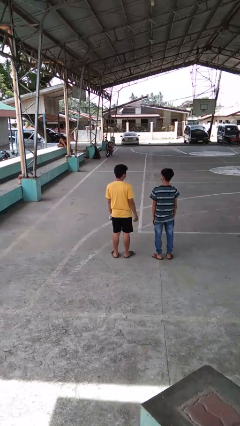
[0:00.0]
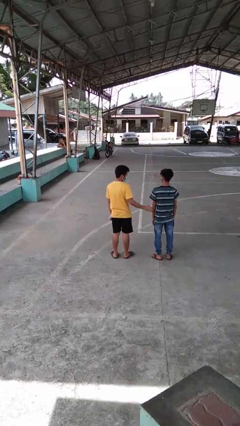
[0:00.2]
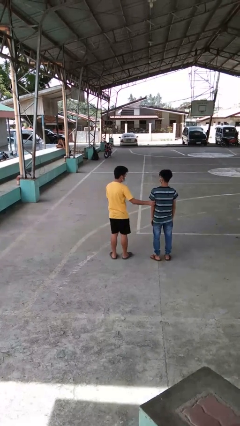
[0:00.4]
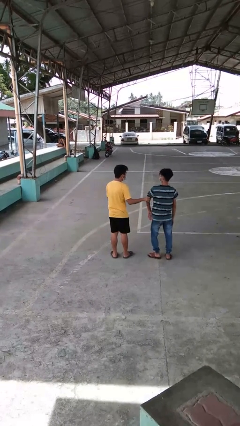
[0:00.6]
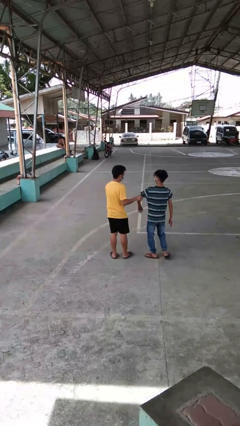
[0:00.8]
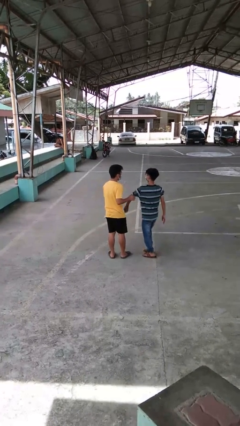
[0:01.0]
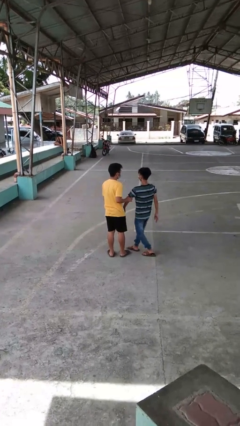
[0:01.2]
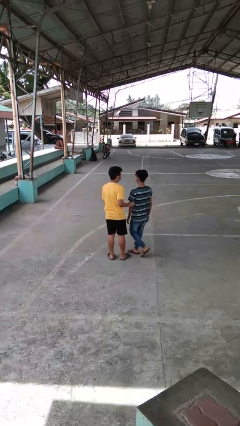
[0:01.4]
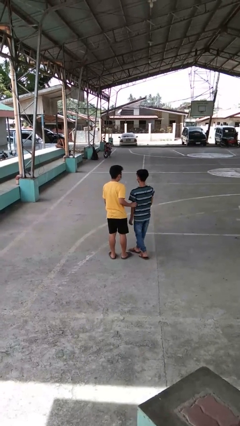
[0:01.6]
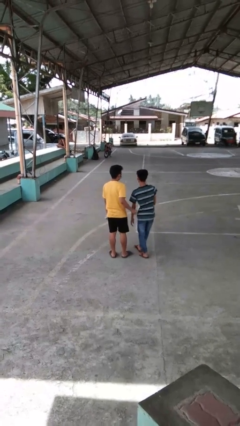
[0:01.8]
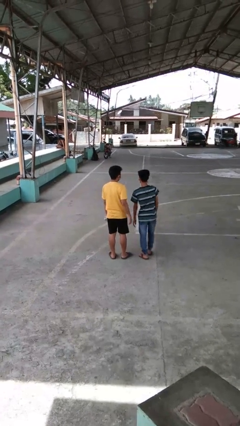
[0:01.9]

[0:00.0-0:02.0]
person grabs person by bicep

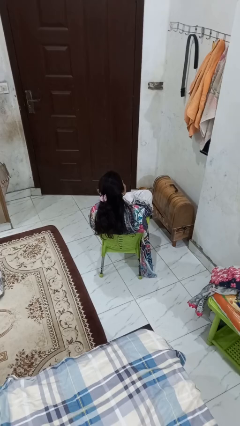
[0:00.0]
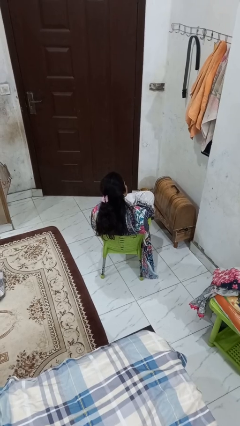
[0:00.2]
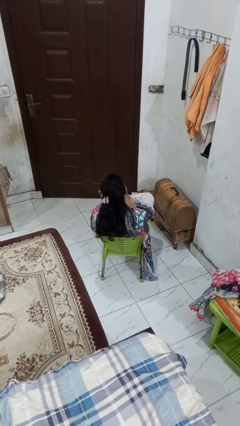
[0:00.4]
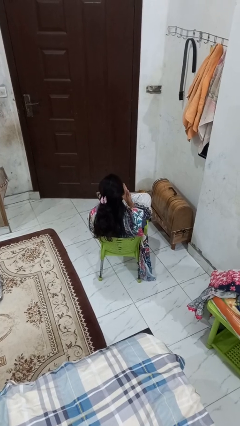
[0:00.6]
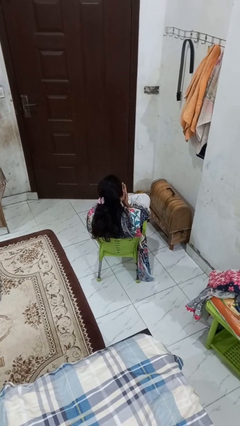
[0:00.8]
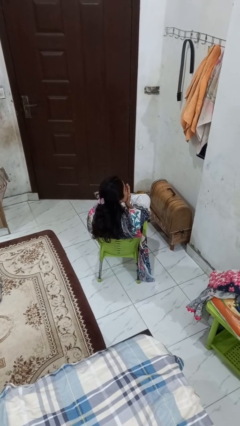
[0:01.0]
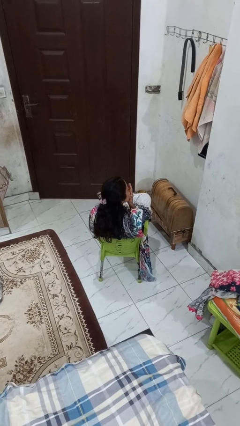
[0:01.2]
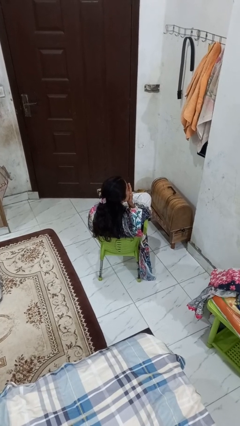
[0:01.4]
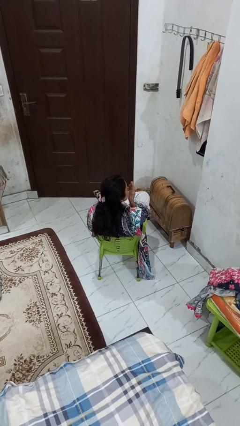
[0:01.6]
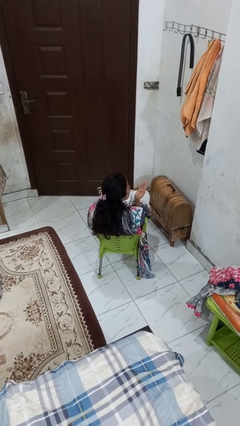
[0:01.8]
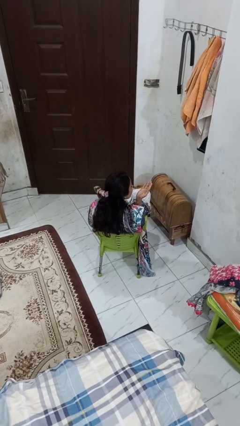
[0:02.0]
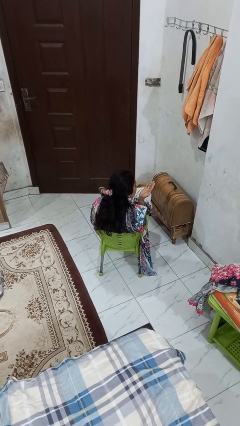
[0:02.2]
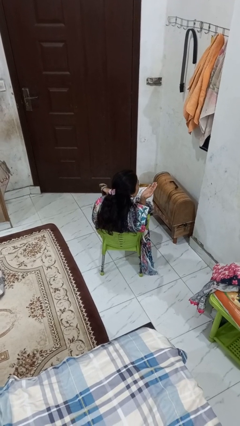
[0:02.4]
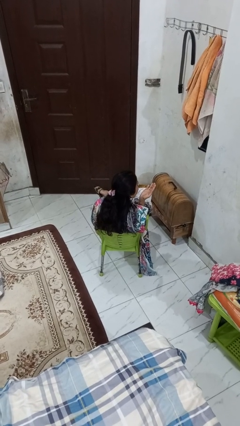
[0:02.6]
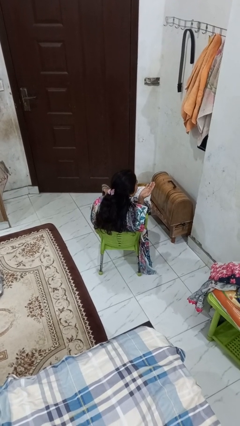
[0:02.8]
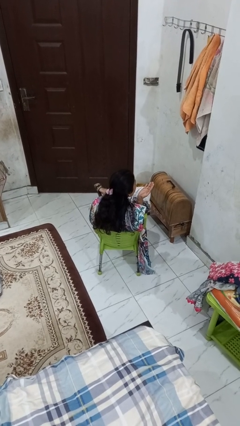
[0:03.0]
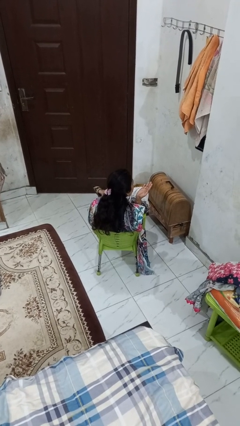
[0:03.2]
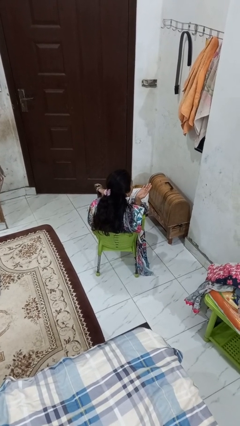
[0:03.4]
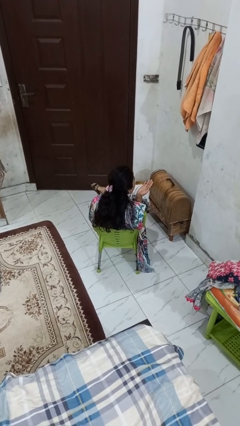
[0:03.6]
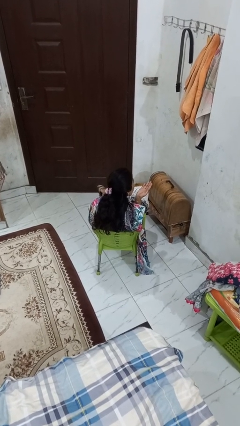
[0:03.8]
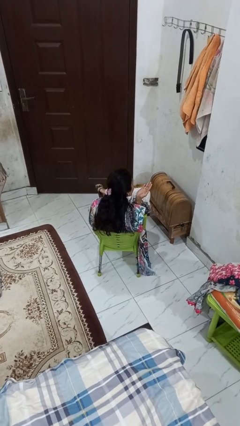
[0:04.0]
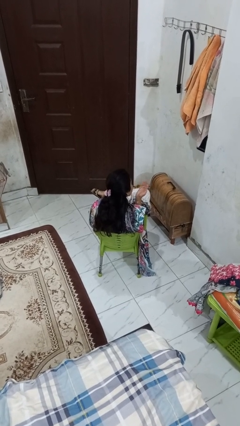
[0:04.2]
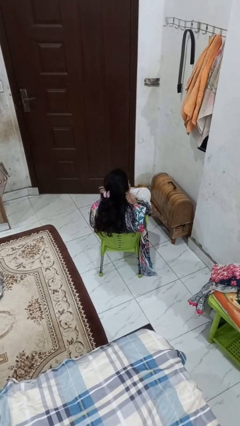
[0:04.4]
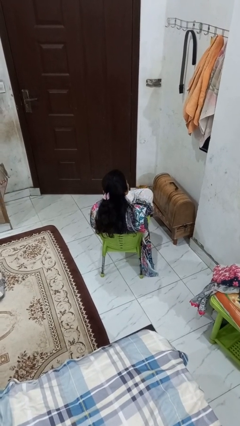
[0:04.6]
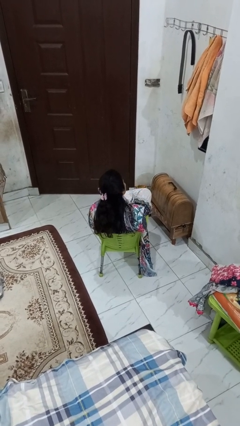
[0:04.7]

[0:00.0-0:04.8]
person gestures blow kiss

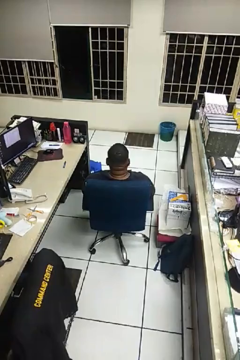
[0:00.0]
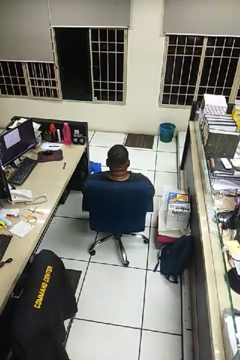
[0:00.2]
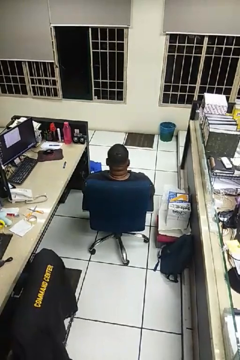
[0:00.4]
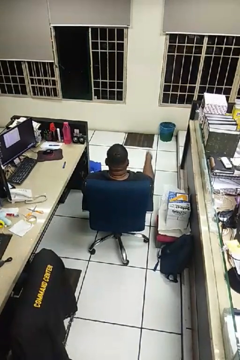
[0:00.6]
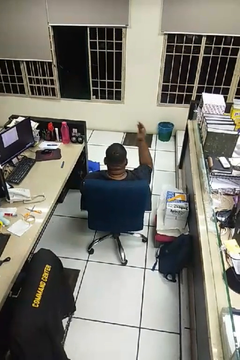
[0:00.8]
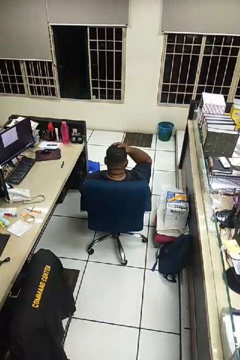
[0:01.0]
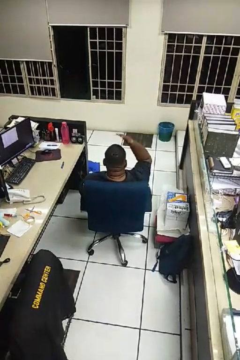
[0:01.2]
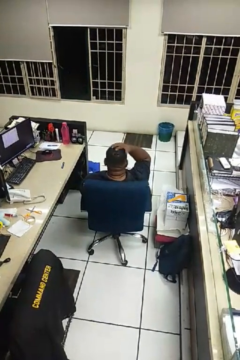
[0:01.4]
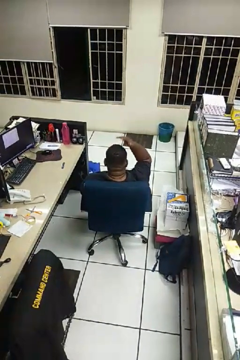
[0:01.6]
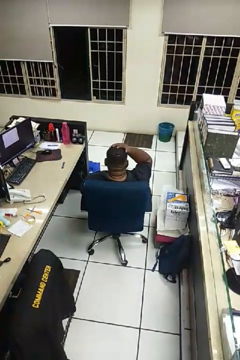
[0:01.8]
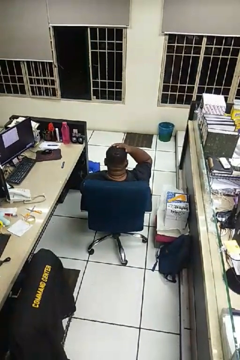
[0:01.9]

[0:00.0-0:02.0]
person pats head

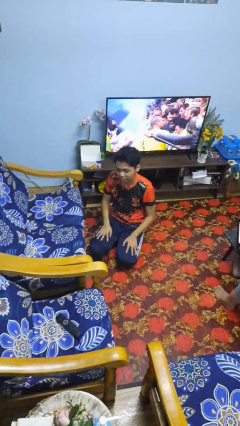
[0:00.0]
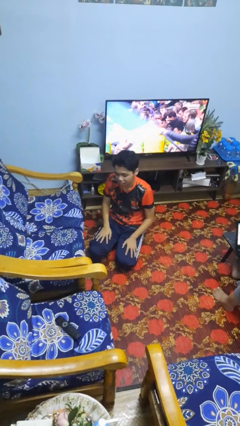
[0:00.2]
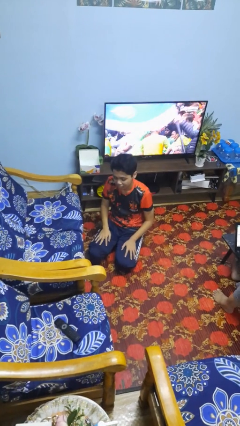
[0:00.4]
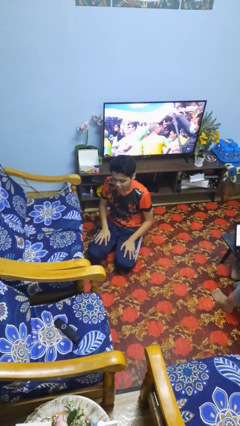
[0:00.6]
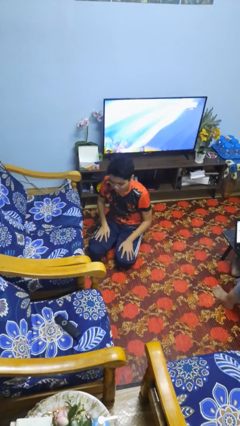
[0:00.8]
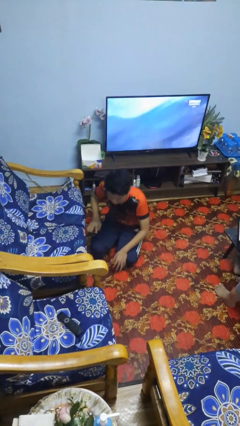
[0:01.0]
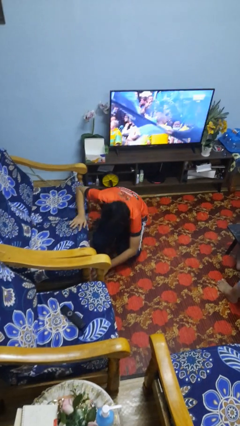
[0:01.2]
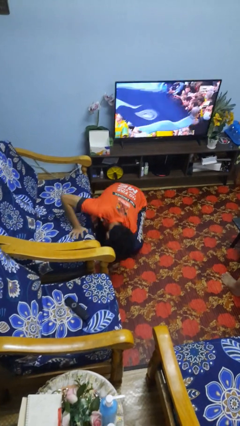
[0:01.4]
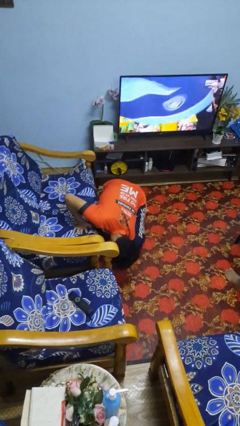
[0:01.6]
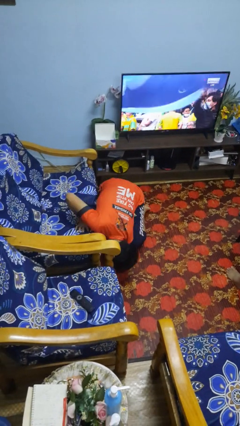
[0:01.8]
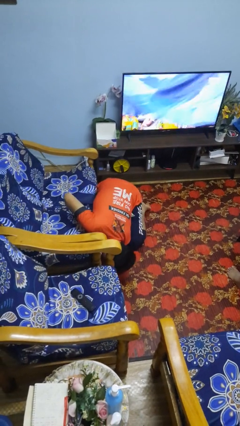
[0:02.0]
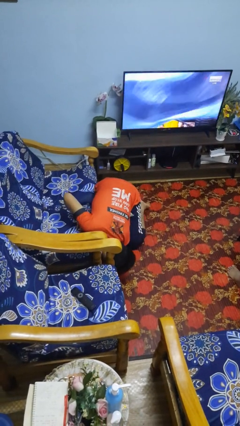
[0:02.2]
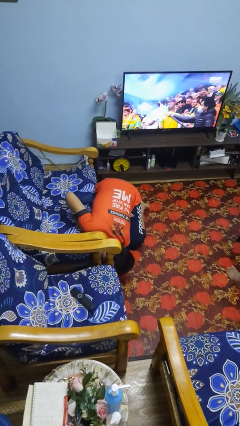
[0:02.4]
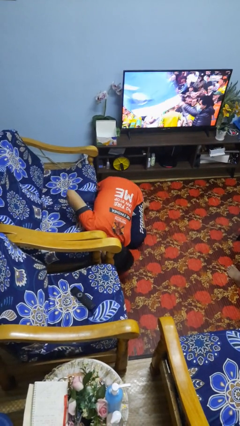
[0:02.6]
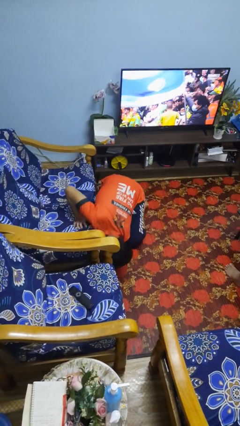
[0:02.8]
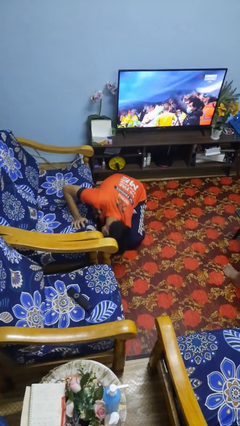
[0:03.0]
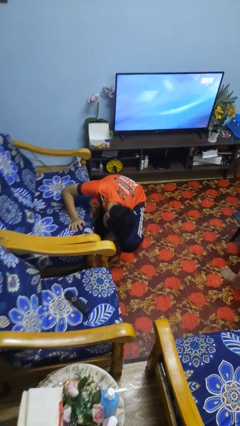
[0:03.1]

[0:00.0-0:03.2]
person searches under couch

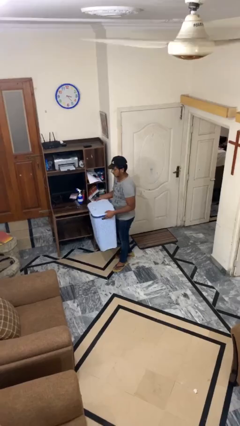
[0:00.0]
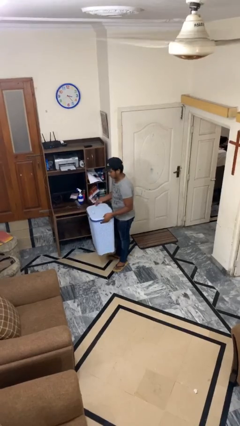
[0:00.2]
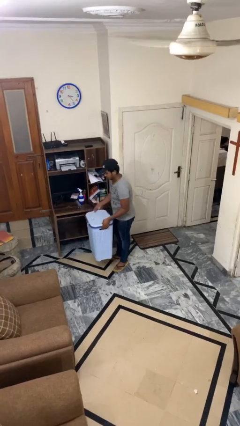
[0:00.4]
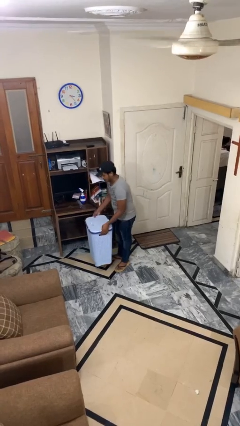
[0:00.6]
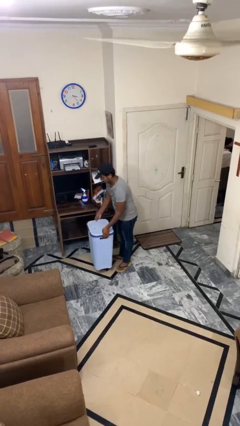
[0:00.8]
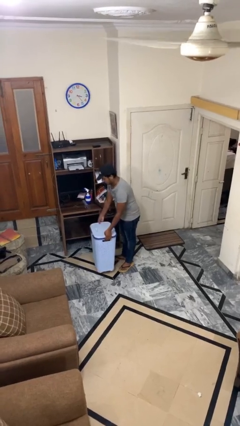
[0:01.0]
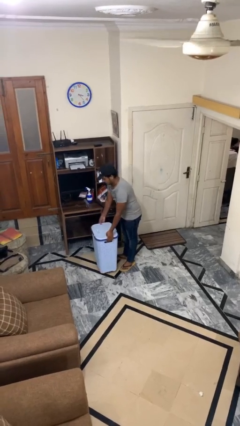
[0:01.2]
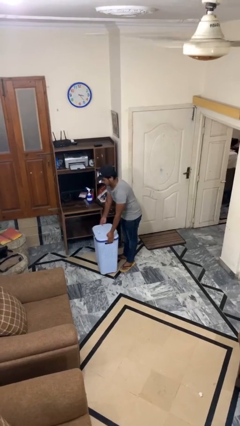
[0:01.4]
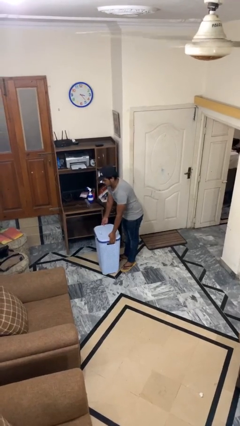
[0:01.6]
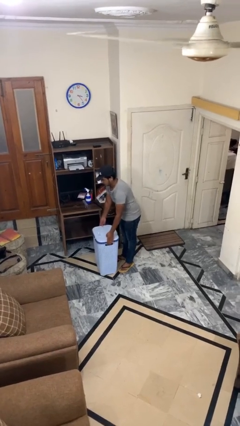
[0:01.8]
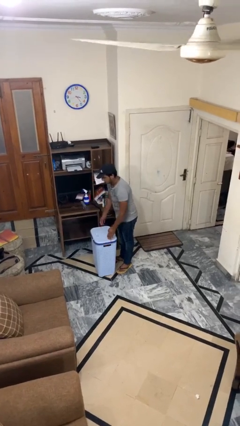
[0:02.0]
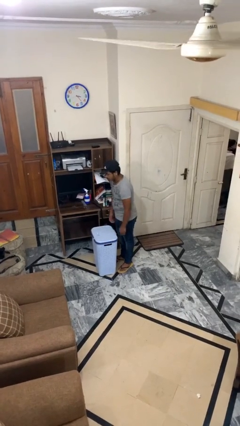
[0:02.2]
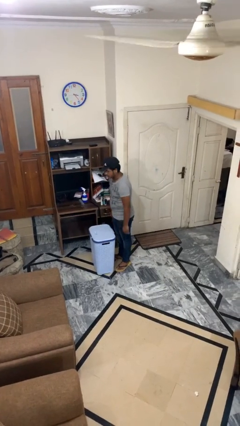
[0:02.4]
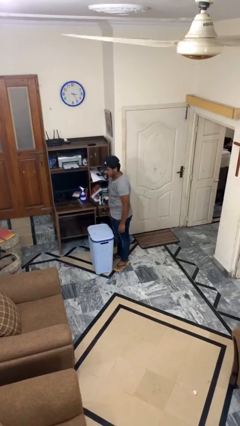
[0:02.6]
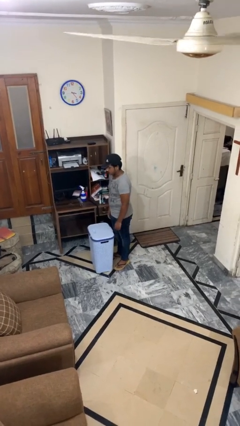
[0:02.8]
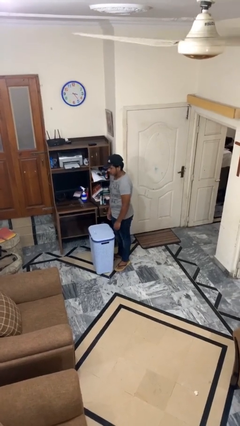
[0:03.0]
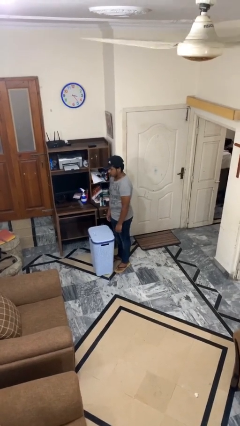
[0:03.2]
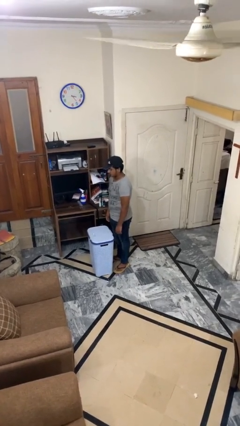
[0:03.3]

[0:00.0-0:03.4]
person puts down object on floor

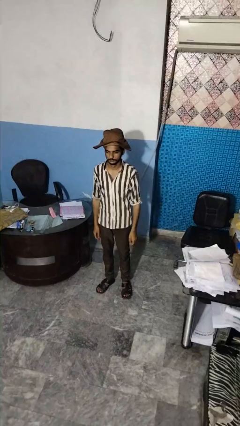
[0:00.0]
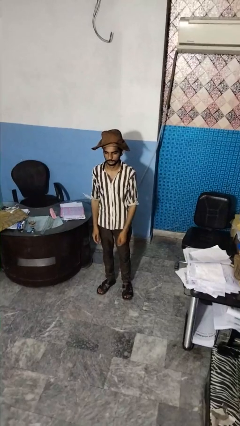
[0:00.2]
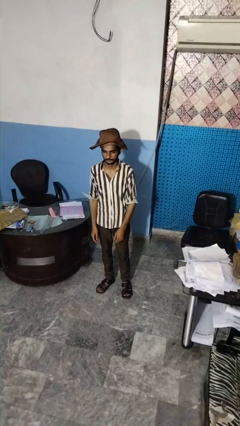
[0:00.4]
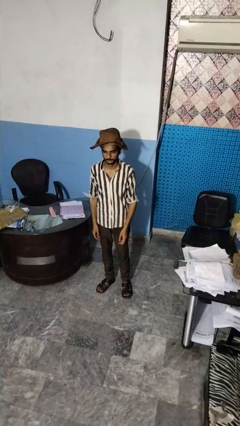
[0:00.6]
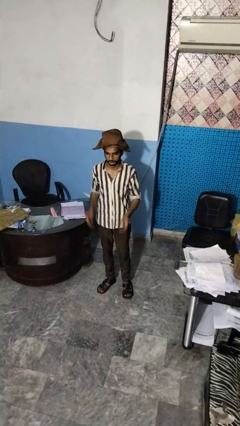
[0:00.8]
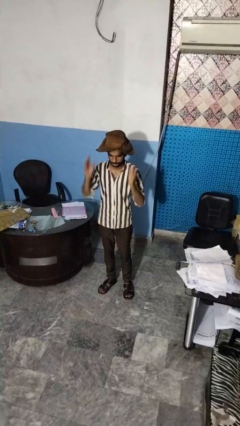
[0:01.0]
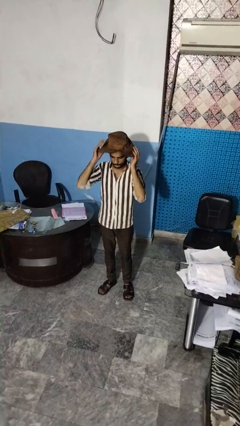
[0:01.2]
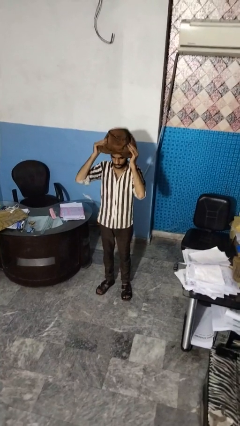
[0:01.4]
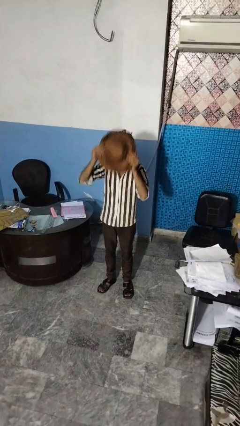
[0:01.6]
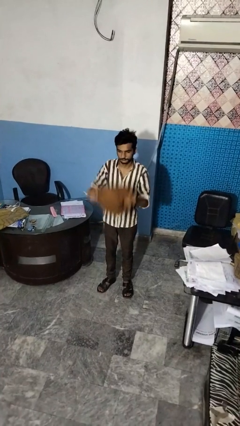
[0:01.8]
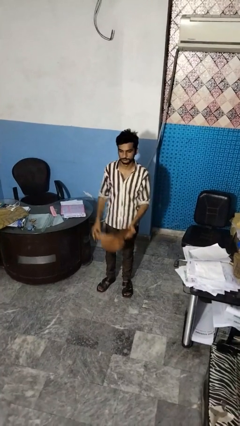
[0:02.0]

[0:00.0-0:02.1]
person takes off hat

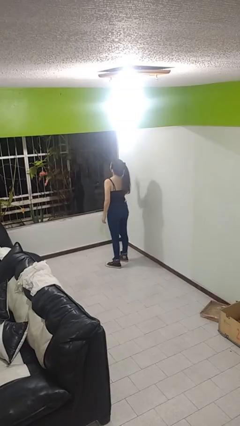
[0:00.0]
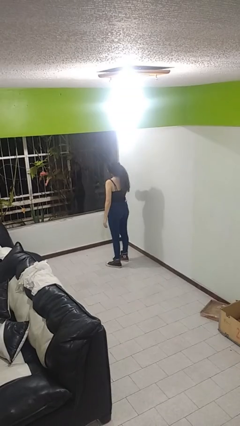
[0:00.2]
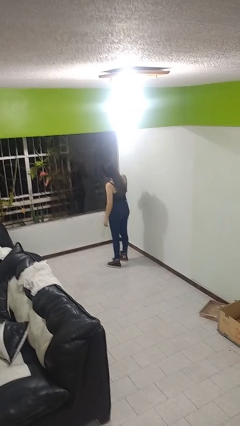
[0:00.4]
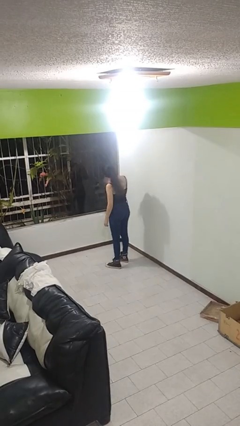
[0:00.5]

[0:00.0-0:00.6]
person swats bug
